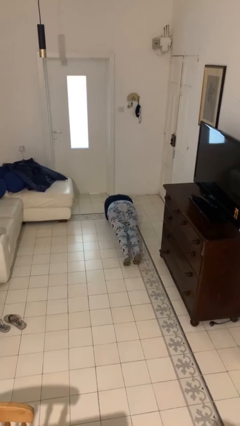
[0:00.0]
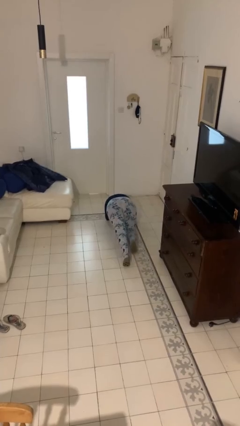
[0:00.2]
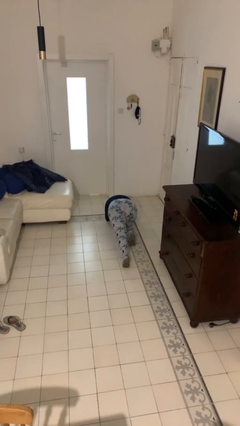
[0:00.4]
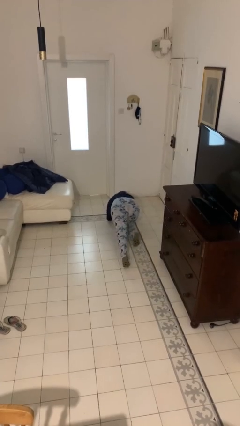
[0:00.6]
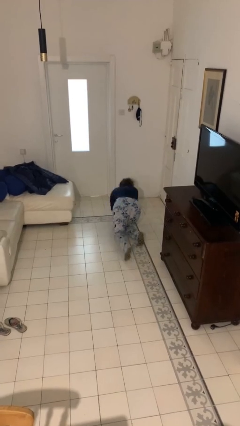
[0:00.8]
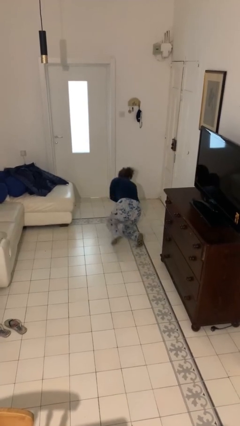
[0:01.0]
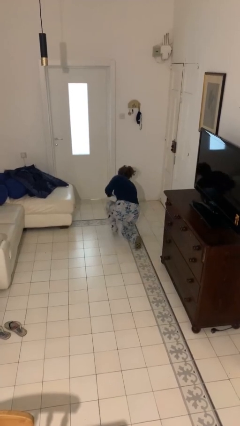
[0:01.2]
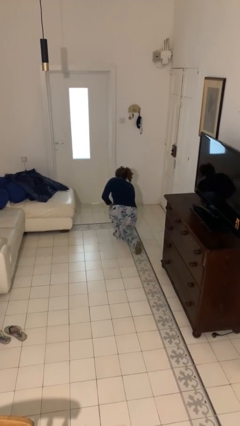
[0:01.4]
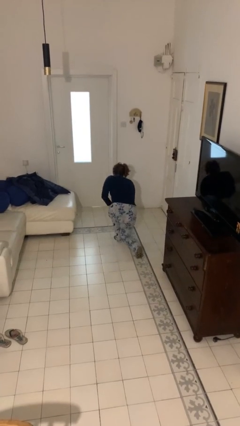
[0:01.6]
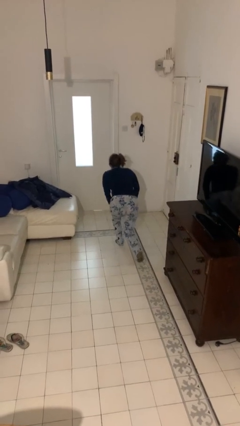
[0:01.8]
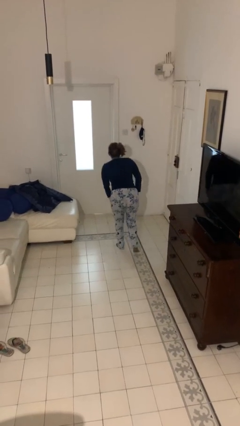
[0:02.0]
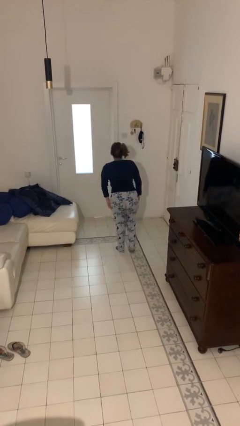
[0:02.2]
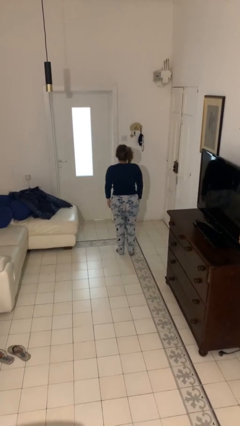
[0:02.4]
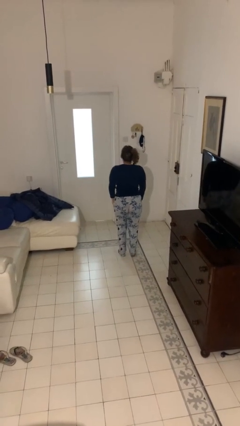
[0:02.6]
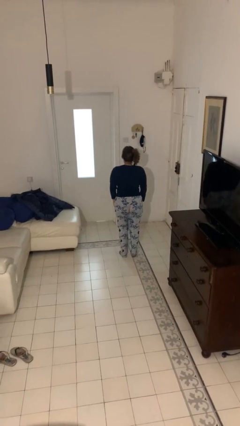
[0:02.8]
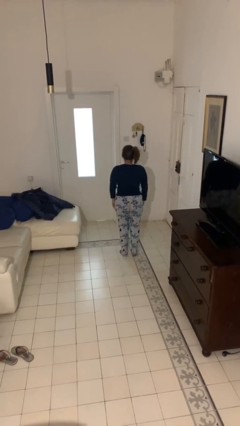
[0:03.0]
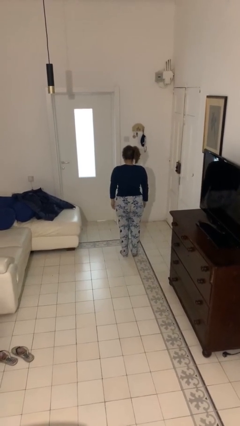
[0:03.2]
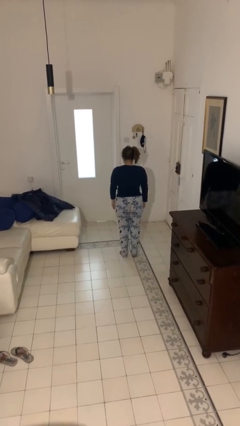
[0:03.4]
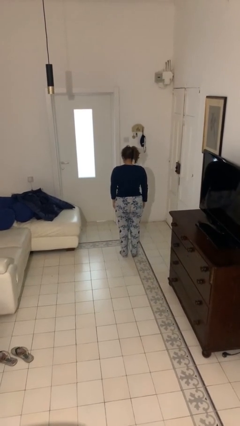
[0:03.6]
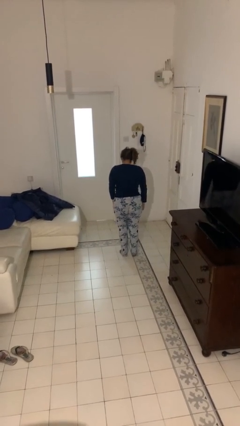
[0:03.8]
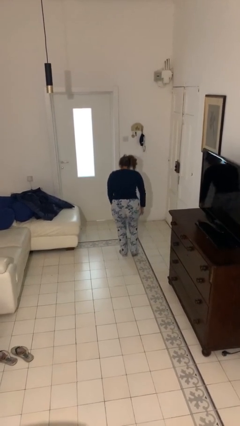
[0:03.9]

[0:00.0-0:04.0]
person stands up from floor

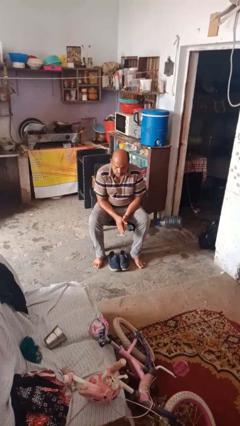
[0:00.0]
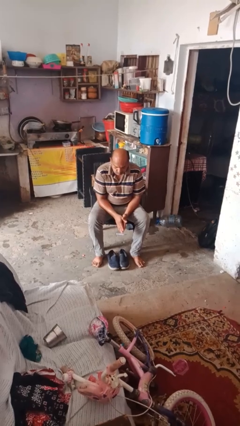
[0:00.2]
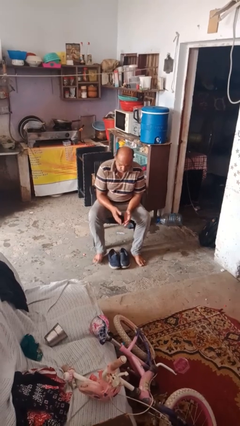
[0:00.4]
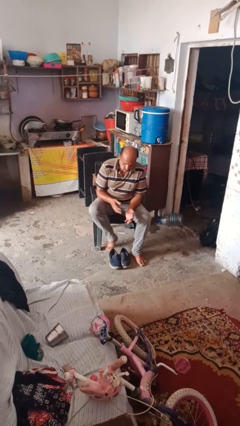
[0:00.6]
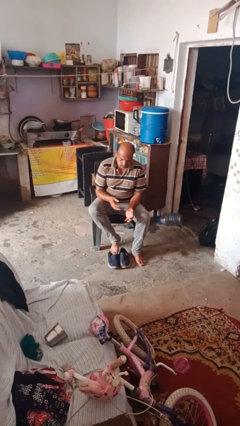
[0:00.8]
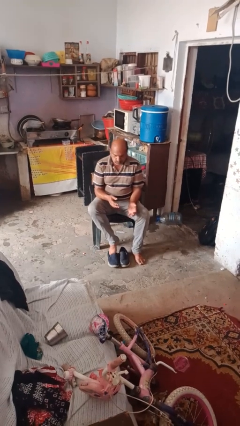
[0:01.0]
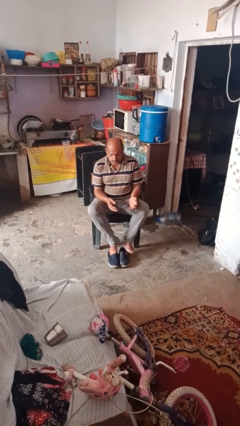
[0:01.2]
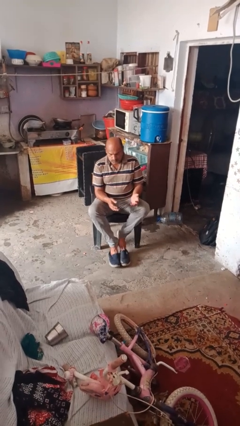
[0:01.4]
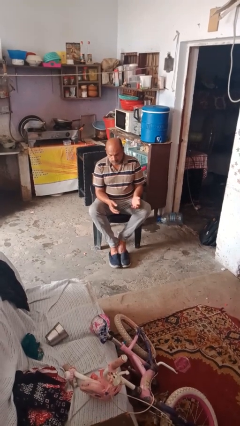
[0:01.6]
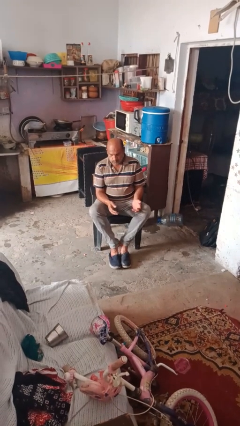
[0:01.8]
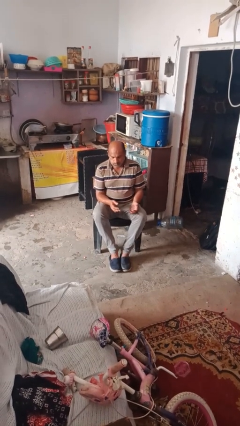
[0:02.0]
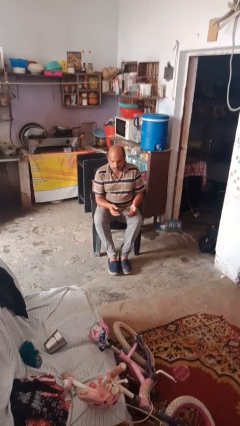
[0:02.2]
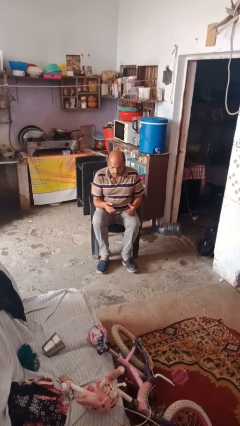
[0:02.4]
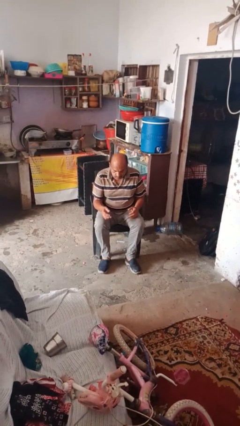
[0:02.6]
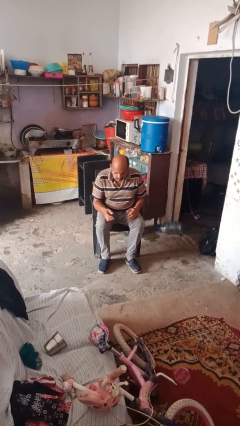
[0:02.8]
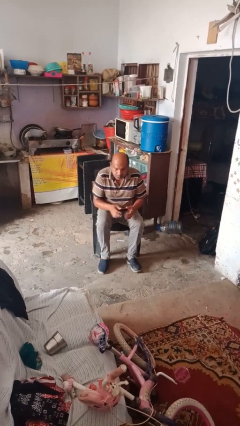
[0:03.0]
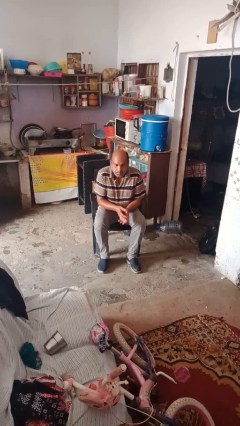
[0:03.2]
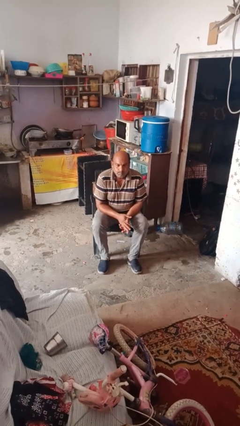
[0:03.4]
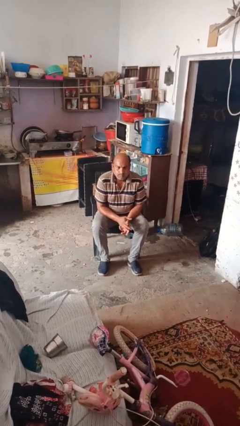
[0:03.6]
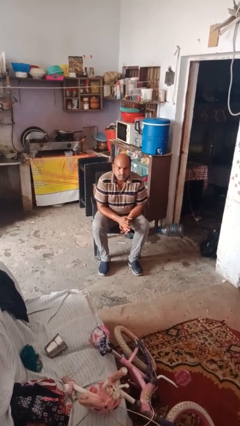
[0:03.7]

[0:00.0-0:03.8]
person puts on shoes

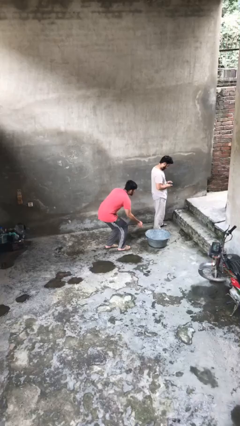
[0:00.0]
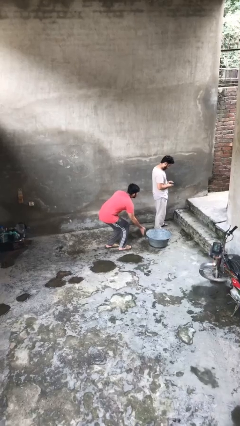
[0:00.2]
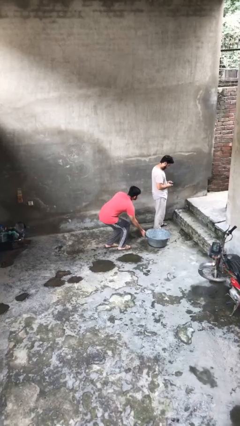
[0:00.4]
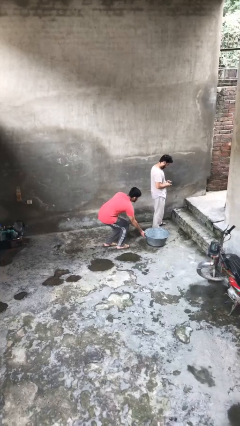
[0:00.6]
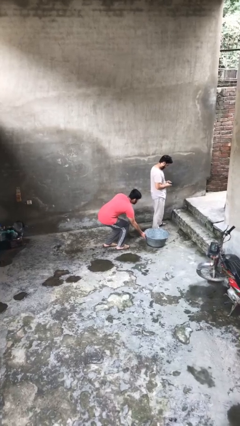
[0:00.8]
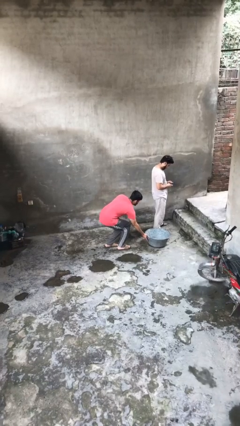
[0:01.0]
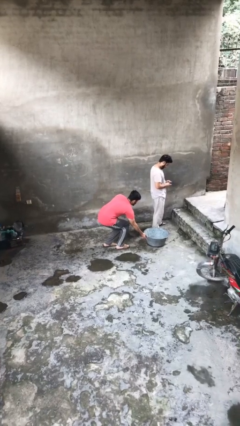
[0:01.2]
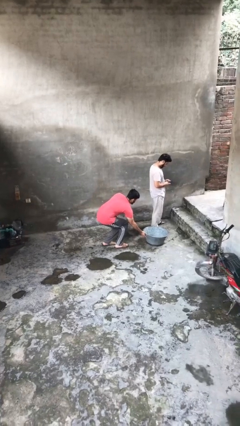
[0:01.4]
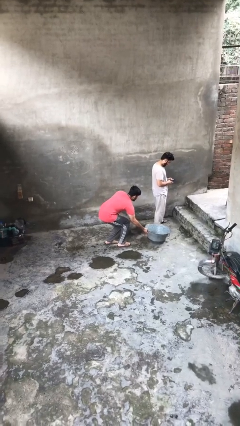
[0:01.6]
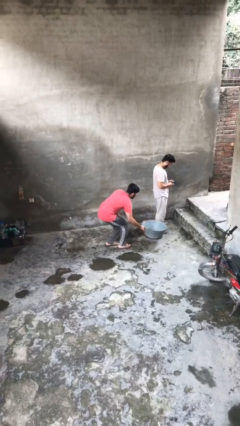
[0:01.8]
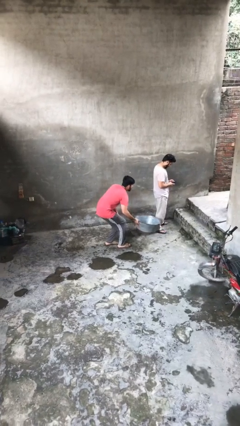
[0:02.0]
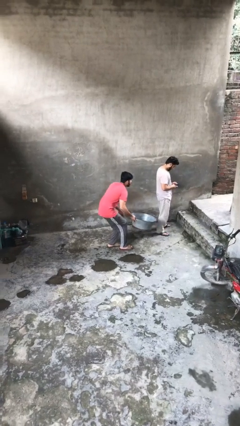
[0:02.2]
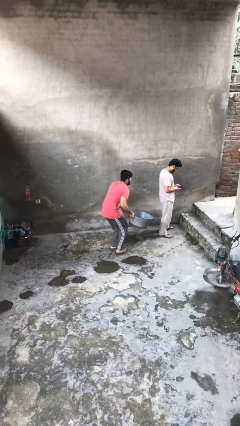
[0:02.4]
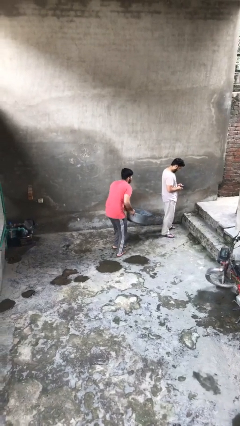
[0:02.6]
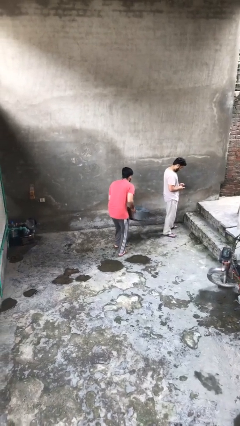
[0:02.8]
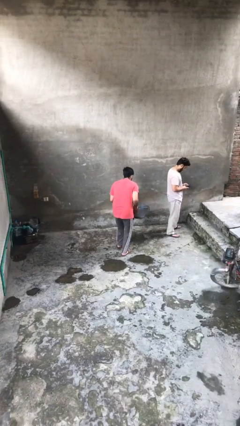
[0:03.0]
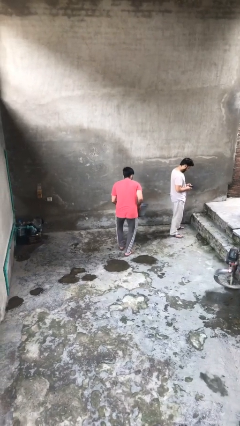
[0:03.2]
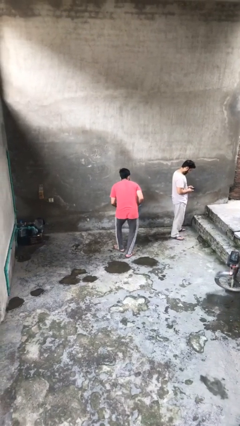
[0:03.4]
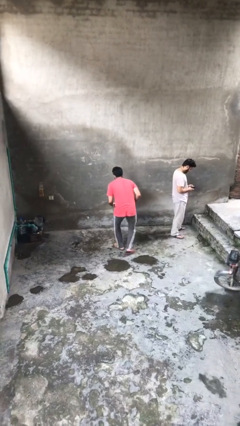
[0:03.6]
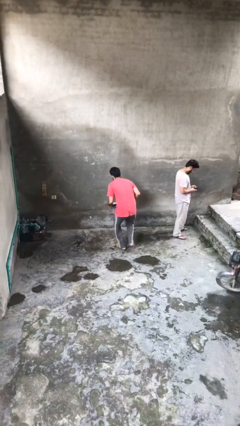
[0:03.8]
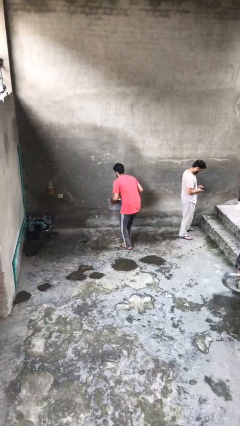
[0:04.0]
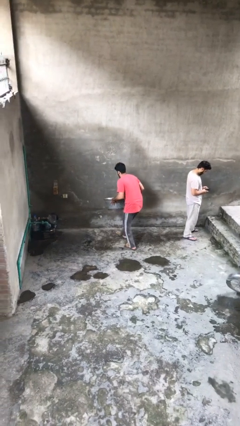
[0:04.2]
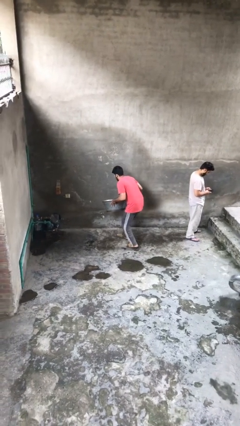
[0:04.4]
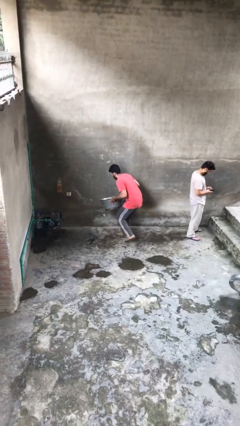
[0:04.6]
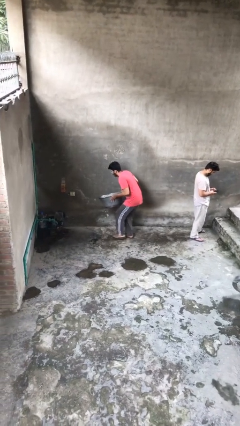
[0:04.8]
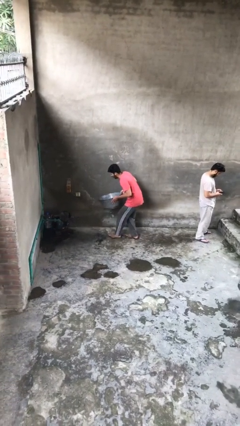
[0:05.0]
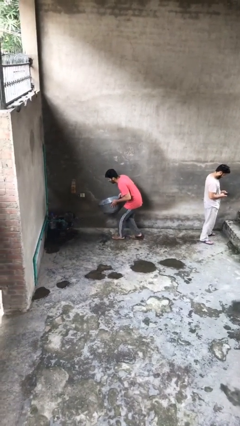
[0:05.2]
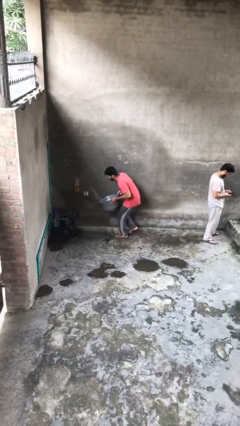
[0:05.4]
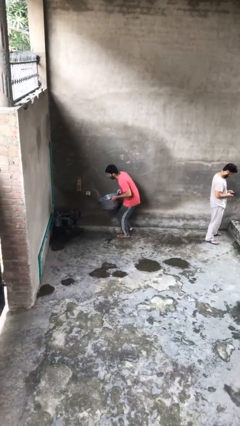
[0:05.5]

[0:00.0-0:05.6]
person steals object from person

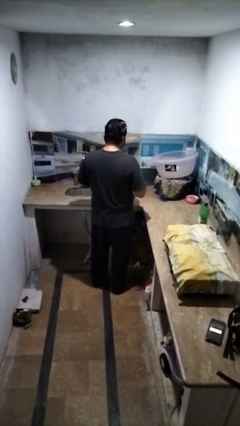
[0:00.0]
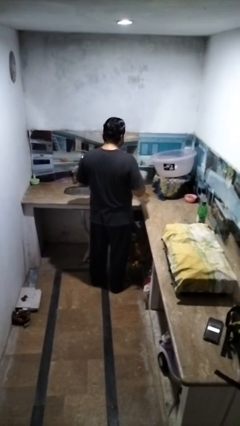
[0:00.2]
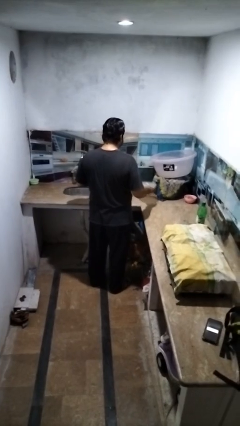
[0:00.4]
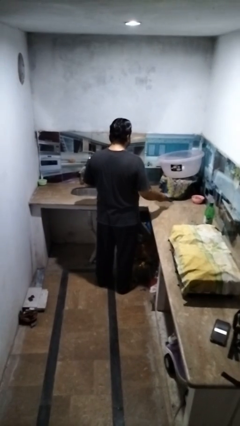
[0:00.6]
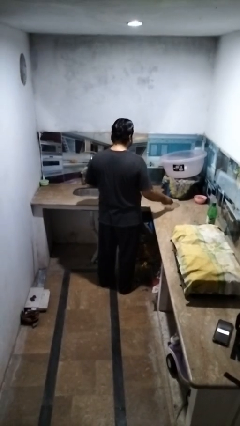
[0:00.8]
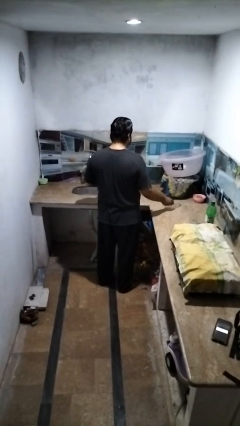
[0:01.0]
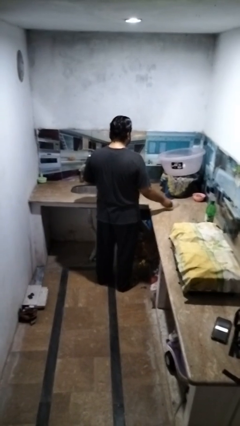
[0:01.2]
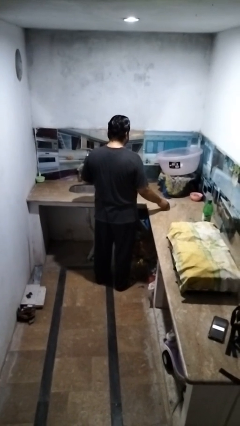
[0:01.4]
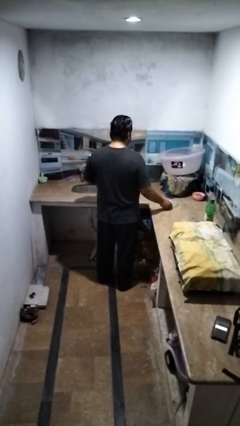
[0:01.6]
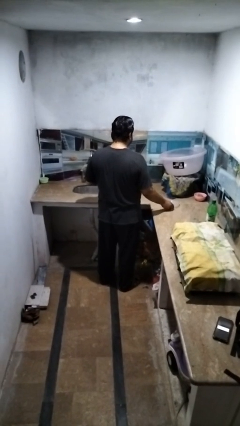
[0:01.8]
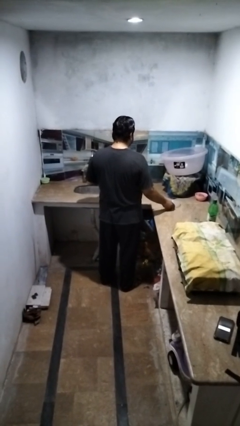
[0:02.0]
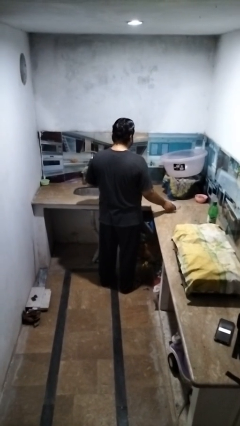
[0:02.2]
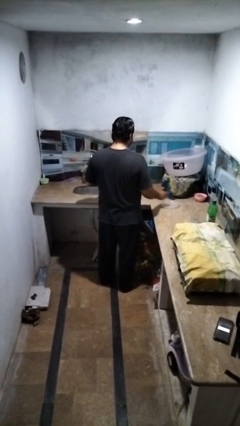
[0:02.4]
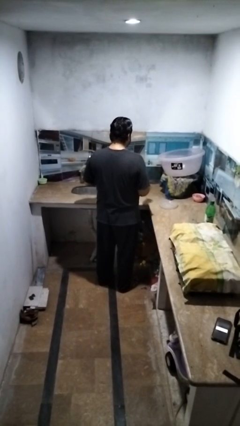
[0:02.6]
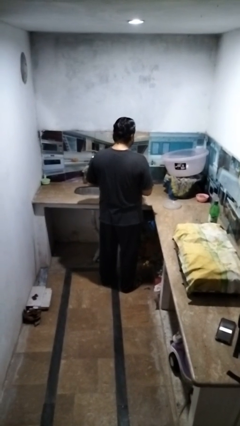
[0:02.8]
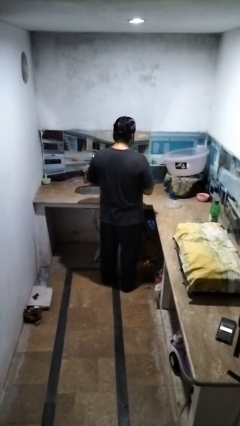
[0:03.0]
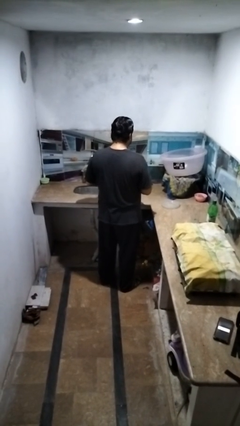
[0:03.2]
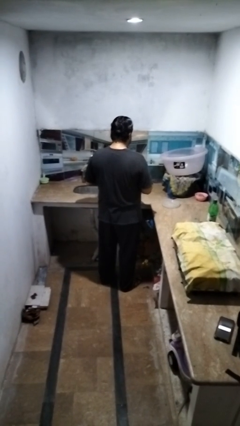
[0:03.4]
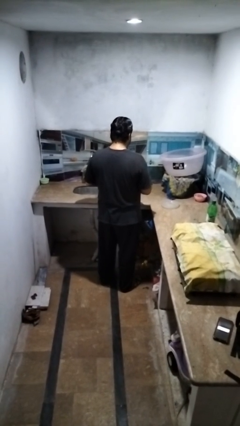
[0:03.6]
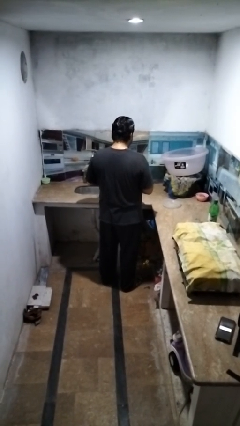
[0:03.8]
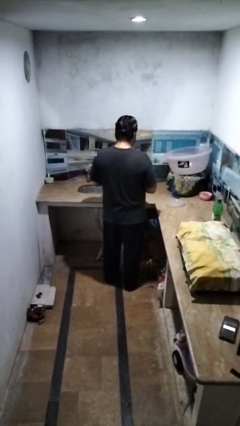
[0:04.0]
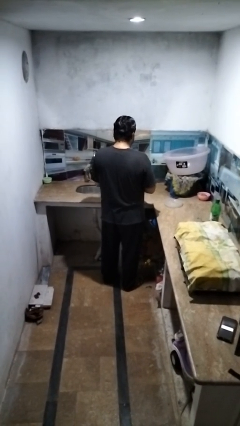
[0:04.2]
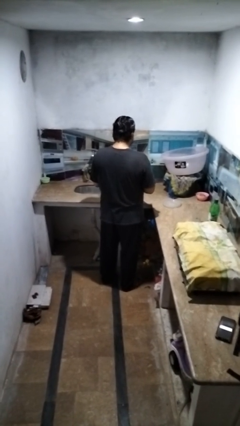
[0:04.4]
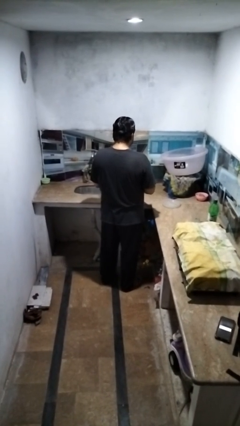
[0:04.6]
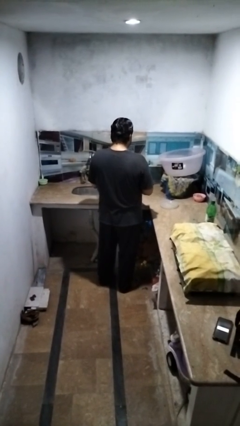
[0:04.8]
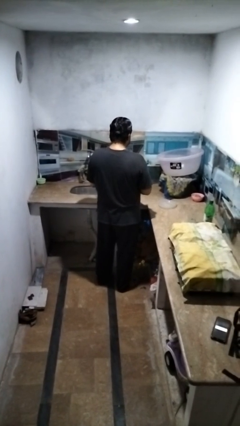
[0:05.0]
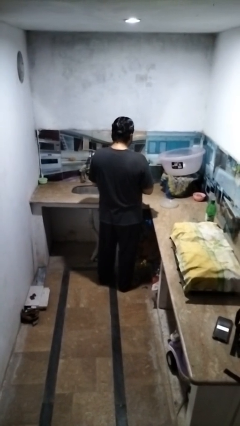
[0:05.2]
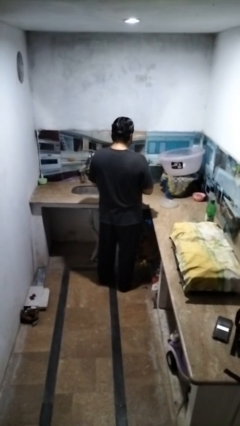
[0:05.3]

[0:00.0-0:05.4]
person sets table
